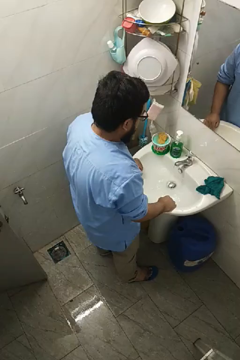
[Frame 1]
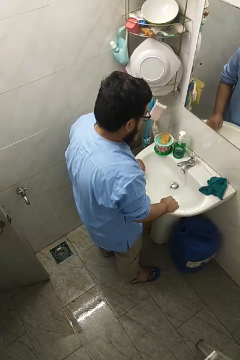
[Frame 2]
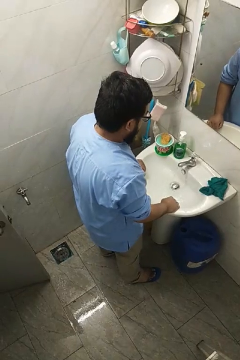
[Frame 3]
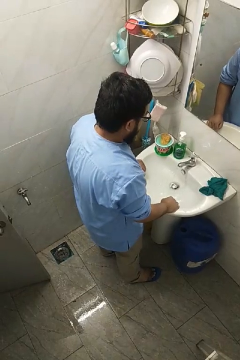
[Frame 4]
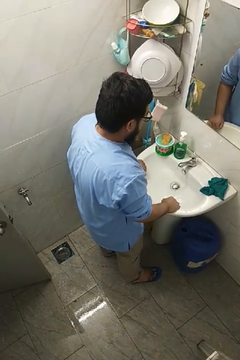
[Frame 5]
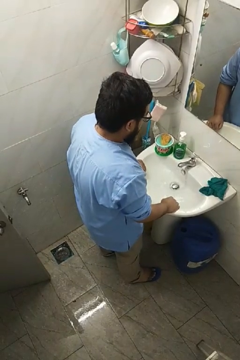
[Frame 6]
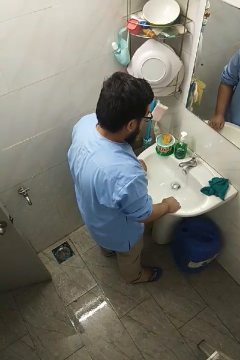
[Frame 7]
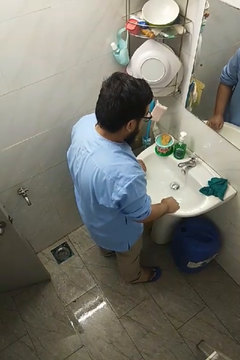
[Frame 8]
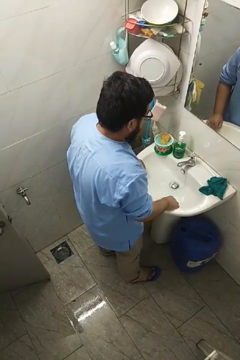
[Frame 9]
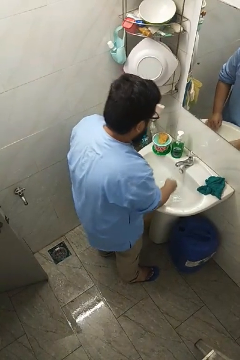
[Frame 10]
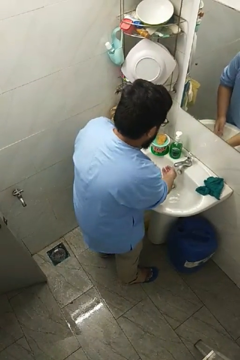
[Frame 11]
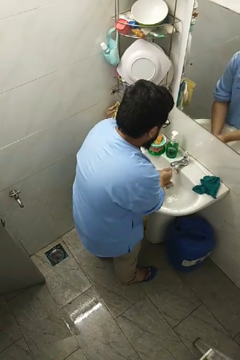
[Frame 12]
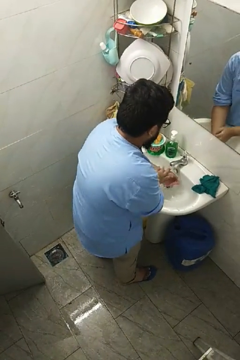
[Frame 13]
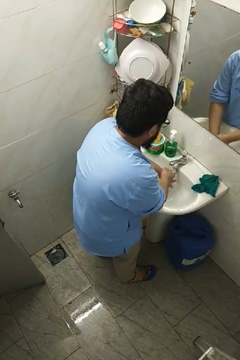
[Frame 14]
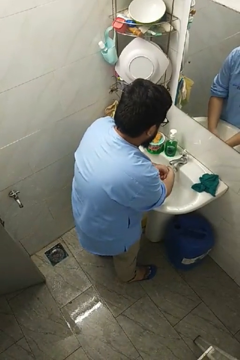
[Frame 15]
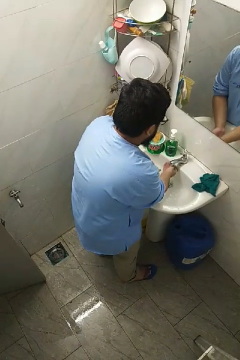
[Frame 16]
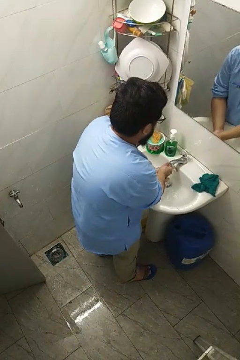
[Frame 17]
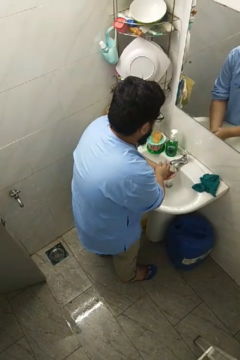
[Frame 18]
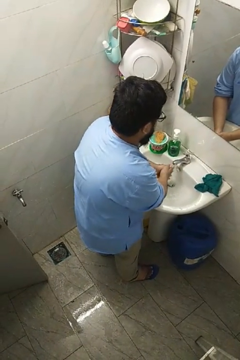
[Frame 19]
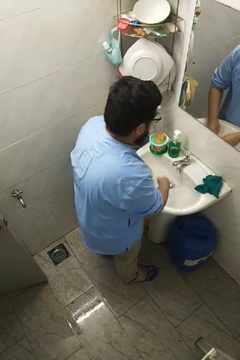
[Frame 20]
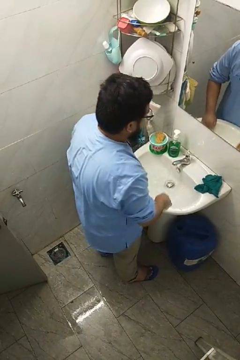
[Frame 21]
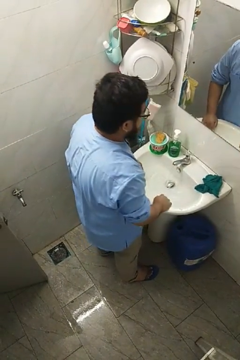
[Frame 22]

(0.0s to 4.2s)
person washes hands

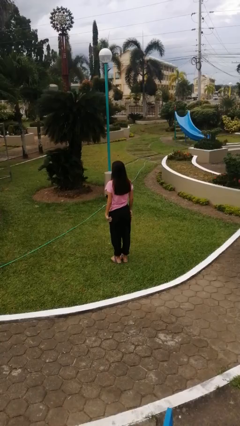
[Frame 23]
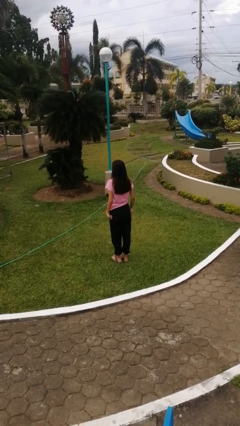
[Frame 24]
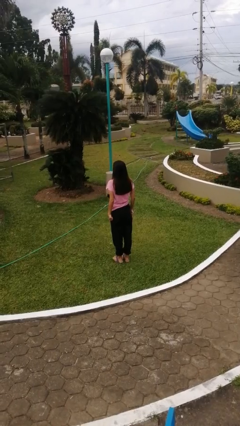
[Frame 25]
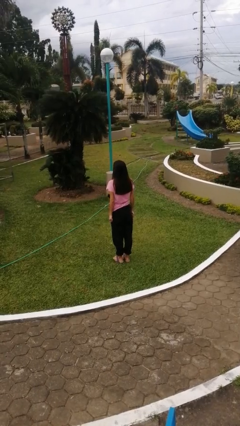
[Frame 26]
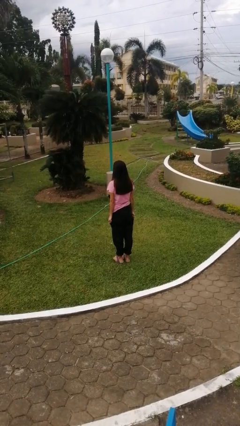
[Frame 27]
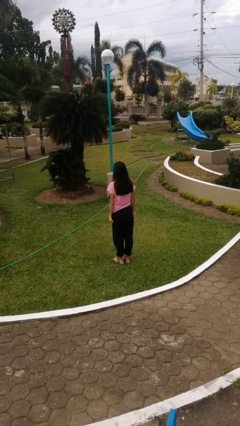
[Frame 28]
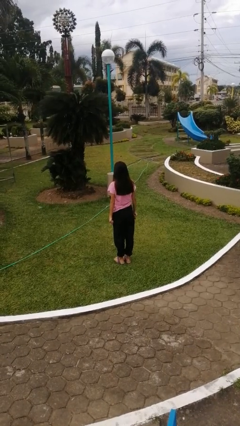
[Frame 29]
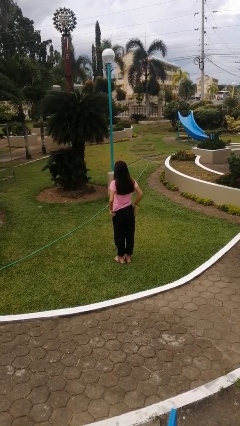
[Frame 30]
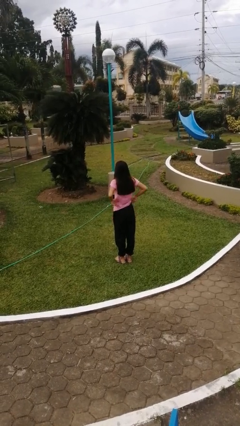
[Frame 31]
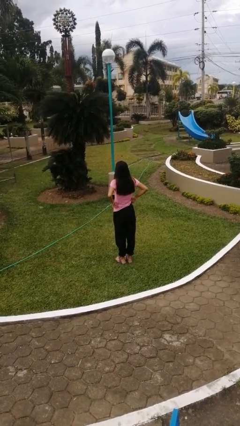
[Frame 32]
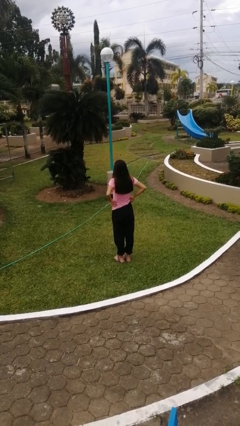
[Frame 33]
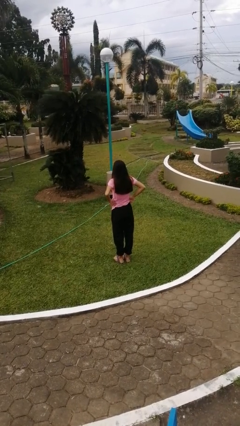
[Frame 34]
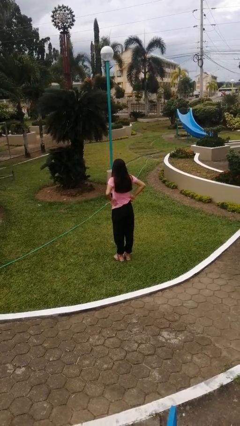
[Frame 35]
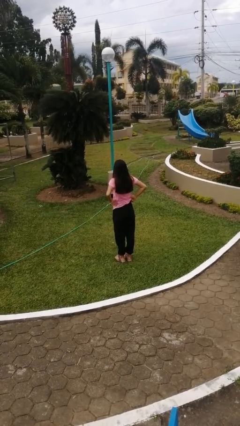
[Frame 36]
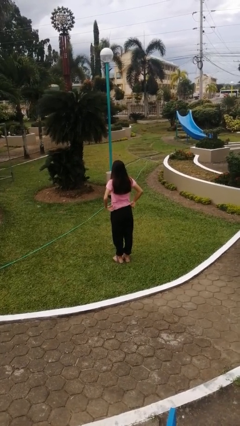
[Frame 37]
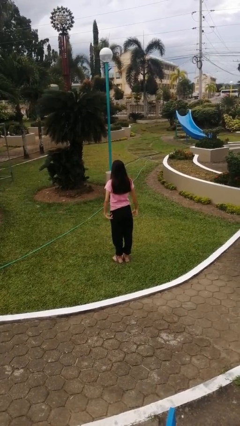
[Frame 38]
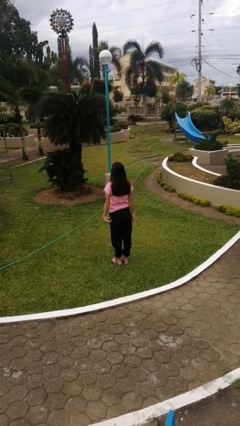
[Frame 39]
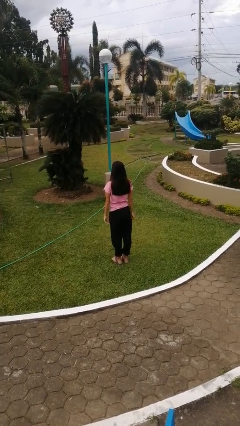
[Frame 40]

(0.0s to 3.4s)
person hikes up pants

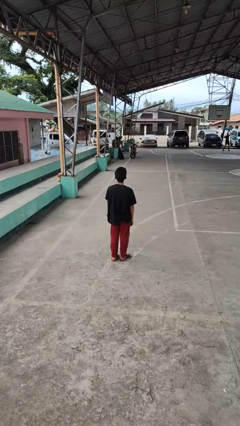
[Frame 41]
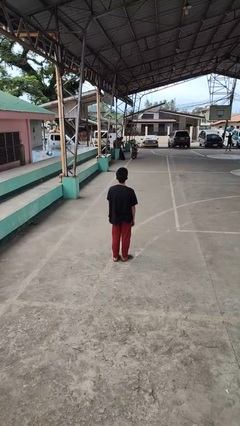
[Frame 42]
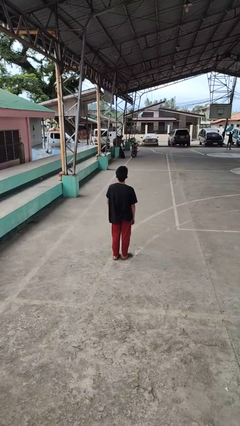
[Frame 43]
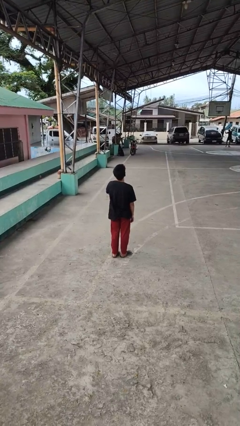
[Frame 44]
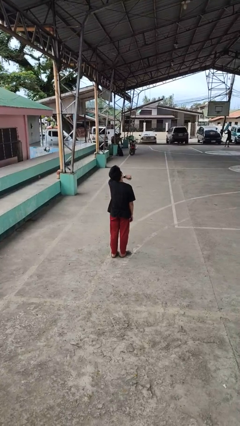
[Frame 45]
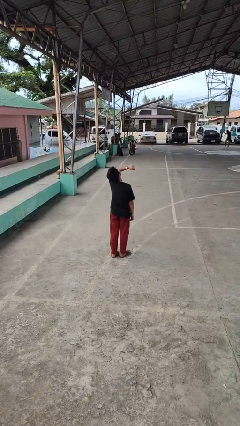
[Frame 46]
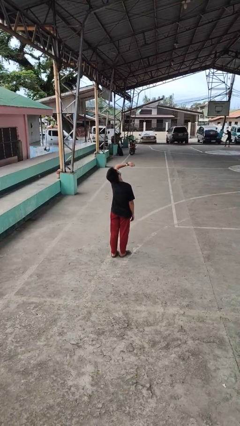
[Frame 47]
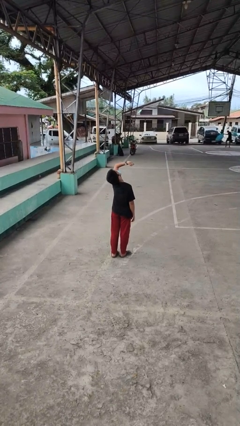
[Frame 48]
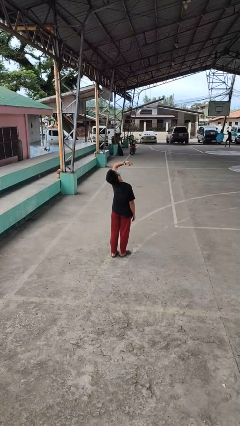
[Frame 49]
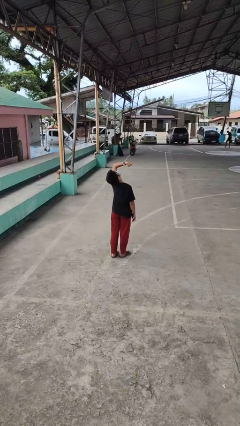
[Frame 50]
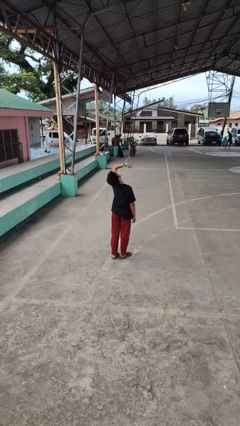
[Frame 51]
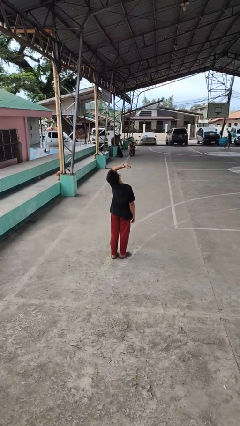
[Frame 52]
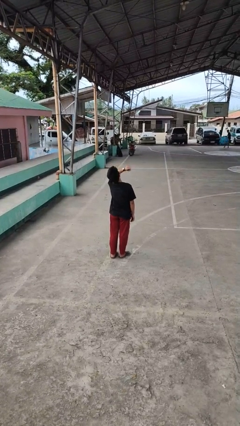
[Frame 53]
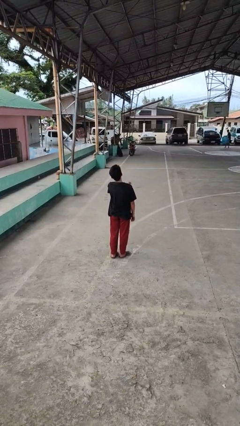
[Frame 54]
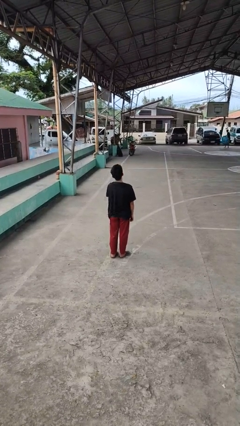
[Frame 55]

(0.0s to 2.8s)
person looks at wristwatch

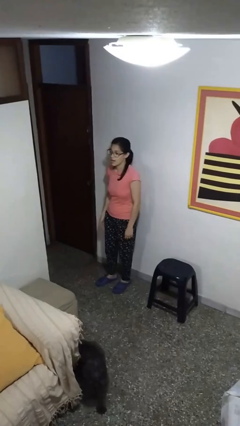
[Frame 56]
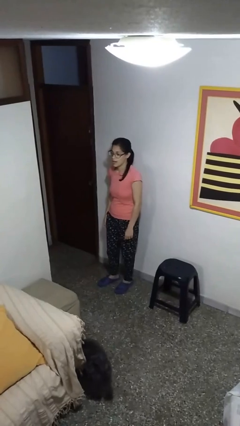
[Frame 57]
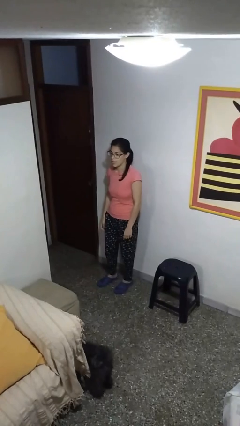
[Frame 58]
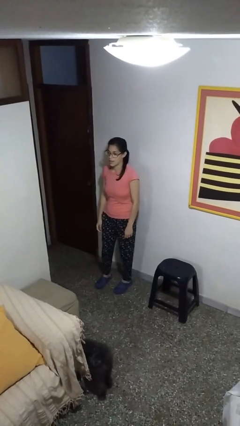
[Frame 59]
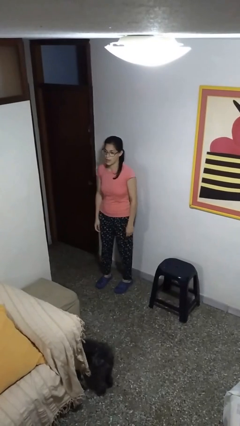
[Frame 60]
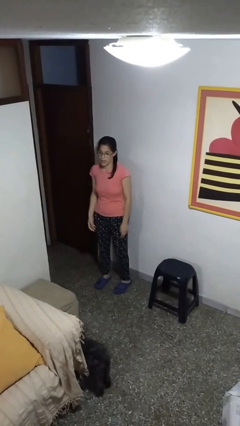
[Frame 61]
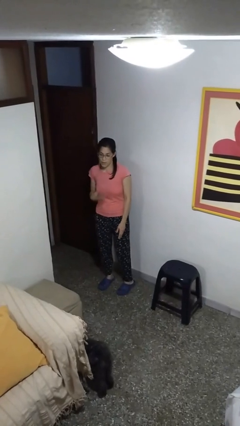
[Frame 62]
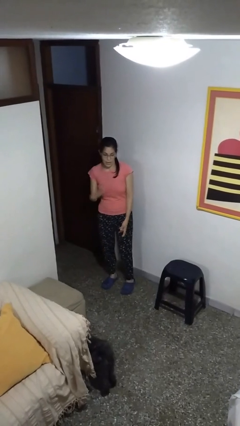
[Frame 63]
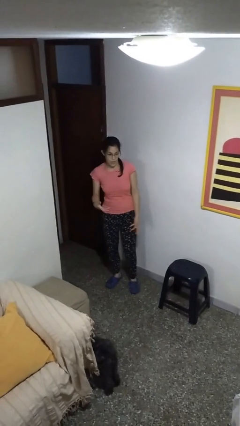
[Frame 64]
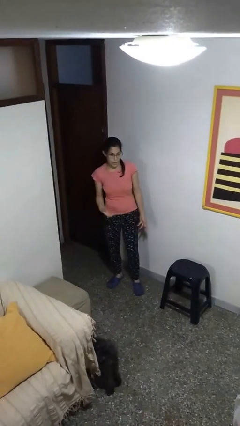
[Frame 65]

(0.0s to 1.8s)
person gestures lower hand

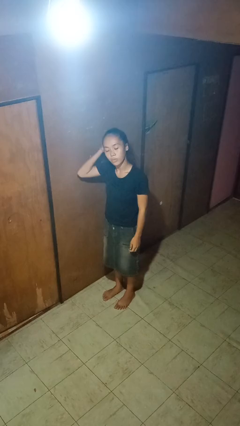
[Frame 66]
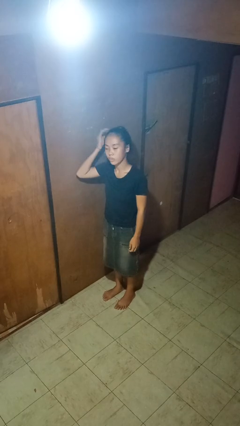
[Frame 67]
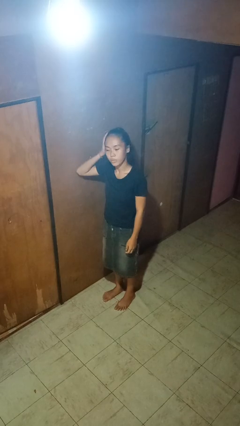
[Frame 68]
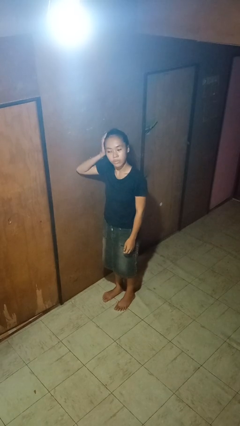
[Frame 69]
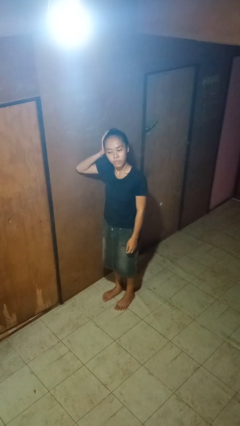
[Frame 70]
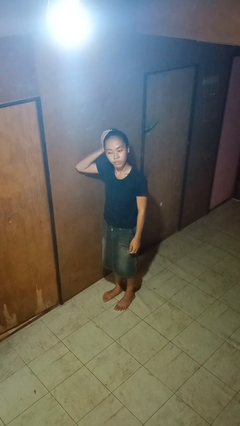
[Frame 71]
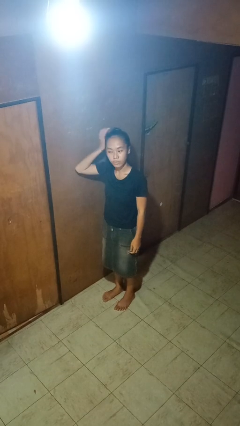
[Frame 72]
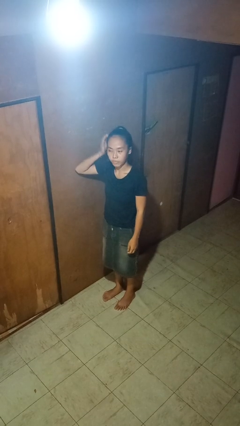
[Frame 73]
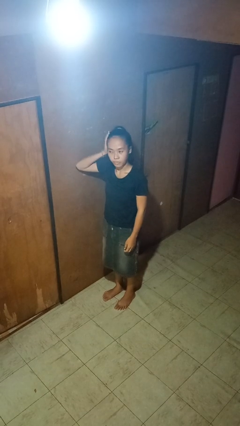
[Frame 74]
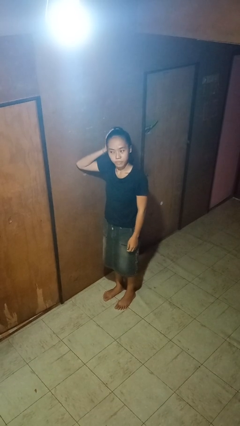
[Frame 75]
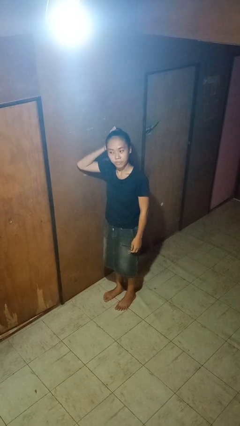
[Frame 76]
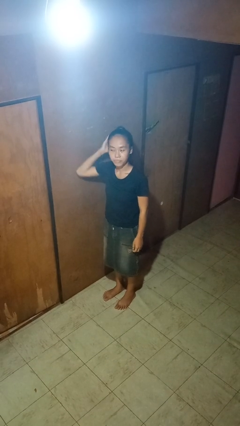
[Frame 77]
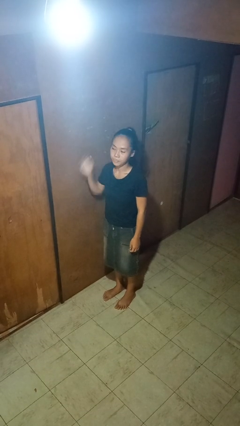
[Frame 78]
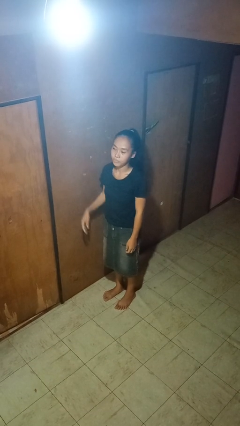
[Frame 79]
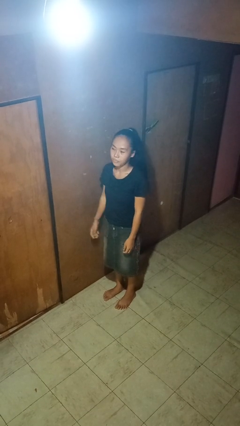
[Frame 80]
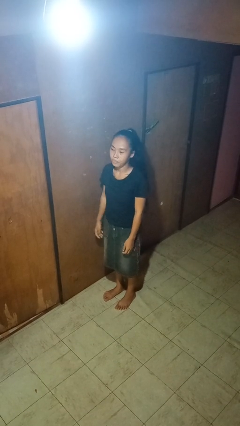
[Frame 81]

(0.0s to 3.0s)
person strokes hair

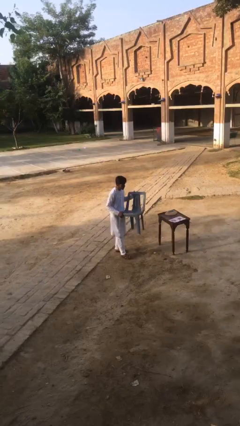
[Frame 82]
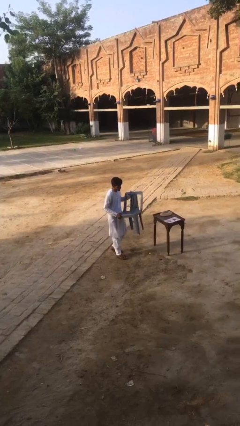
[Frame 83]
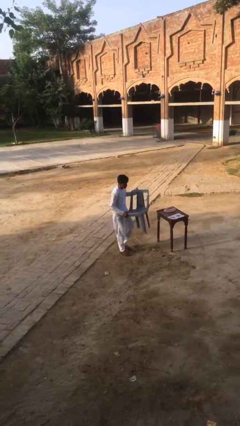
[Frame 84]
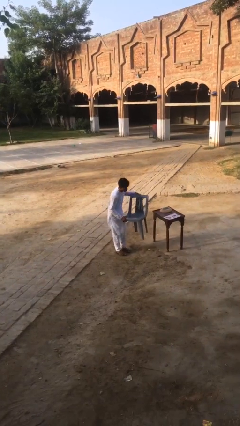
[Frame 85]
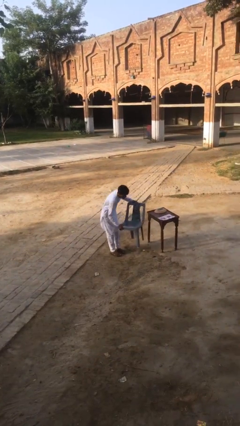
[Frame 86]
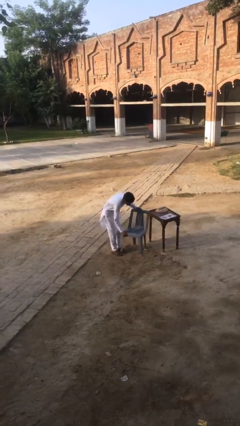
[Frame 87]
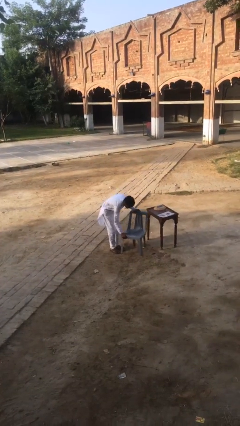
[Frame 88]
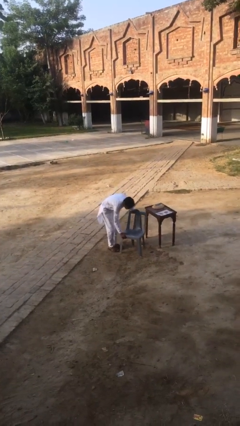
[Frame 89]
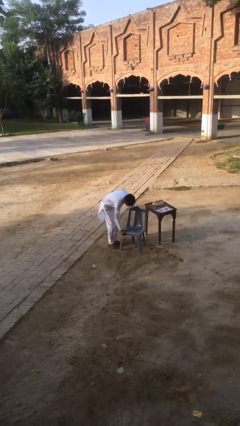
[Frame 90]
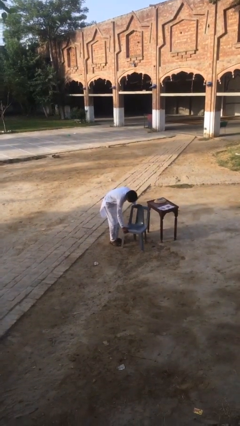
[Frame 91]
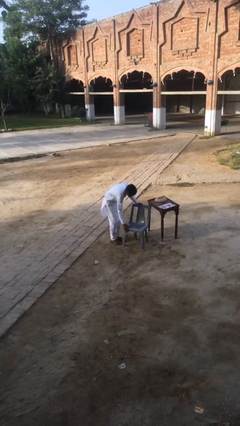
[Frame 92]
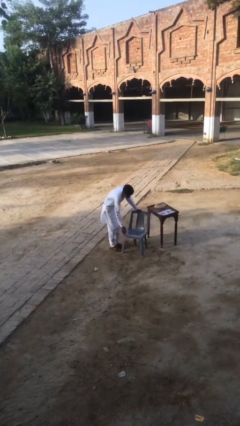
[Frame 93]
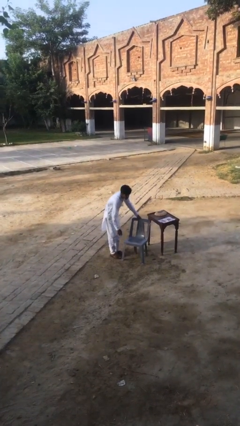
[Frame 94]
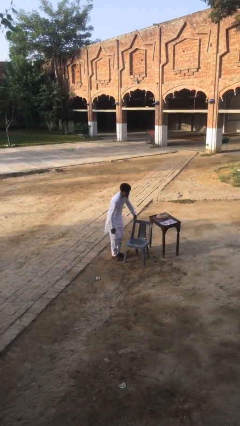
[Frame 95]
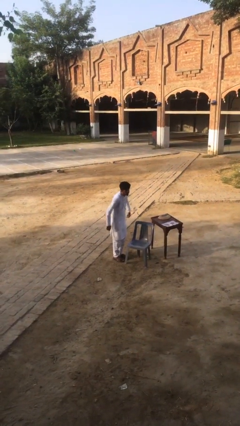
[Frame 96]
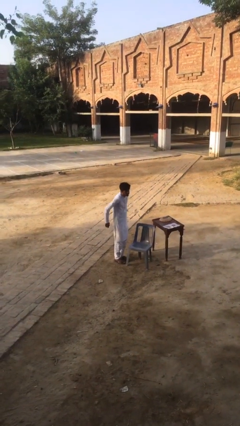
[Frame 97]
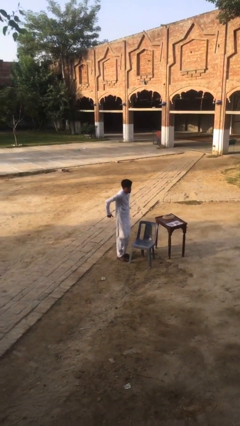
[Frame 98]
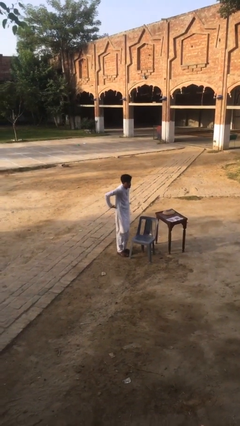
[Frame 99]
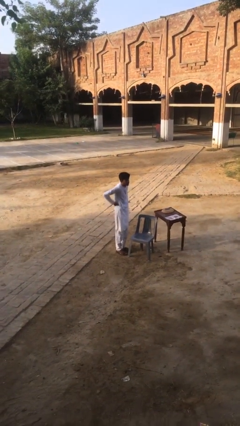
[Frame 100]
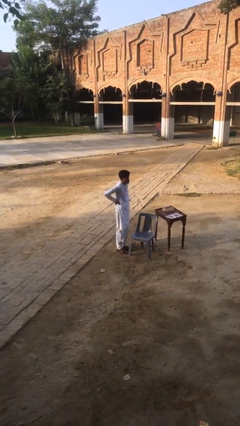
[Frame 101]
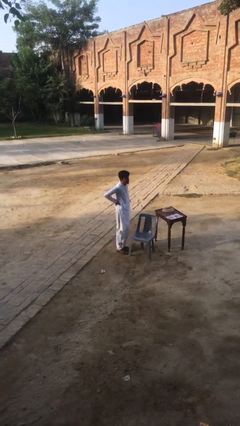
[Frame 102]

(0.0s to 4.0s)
person puts down object on floor
